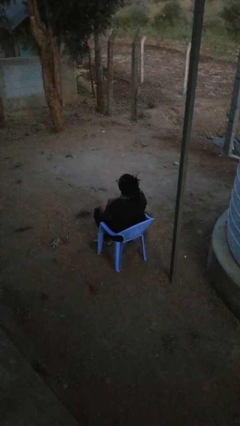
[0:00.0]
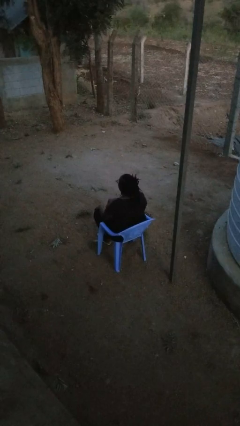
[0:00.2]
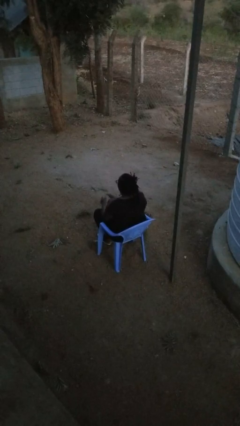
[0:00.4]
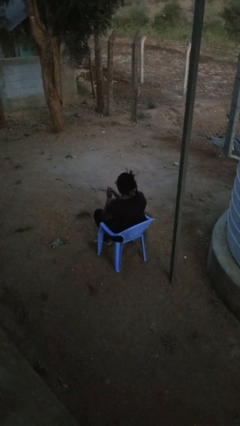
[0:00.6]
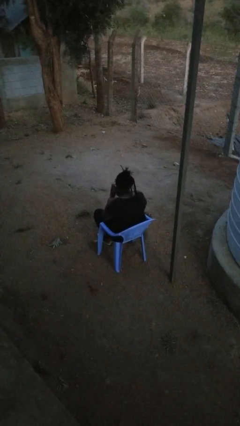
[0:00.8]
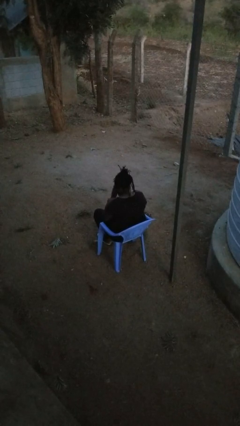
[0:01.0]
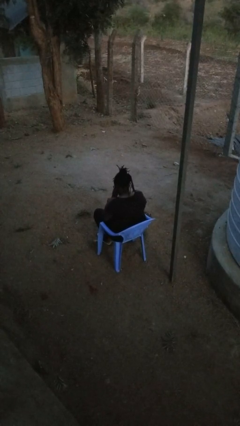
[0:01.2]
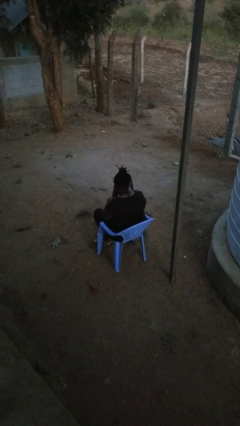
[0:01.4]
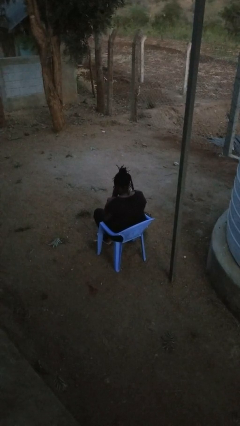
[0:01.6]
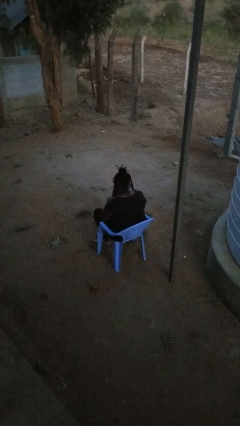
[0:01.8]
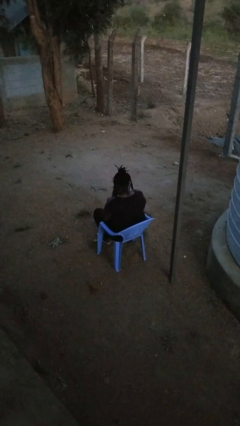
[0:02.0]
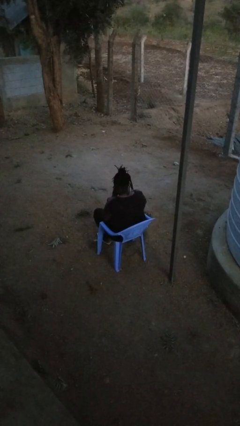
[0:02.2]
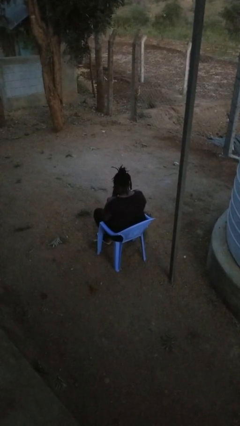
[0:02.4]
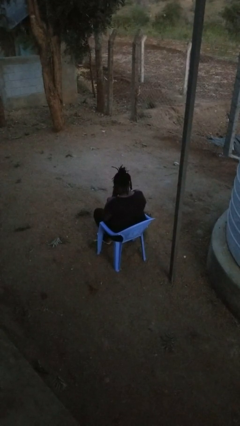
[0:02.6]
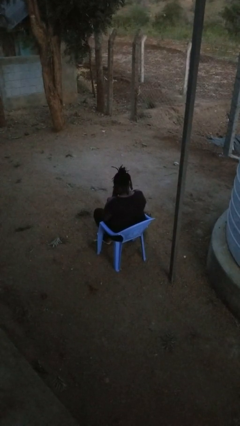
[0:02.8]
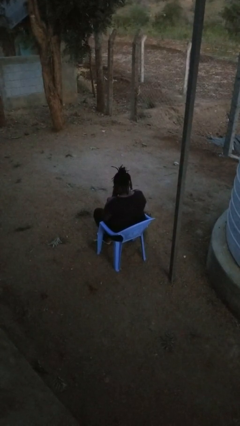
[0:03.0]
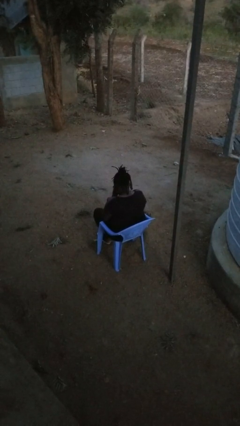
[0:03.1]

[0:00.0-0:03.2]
person prays

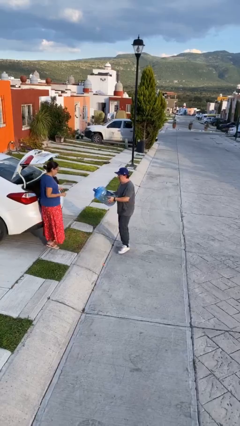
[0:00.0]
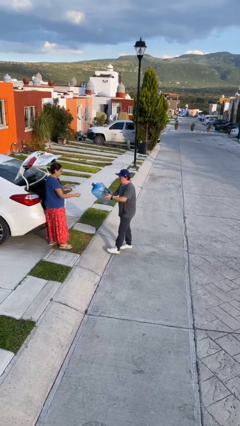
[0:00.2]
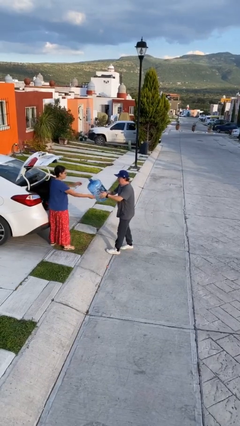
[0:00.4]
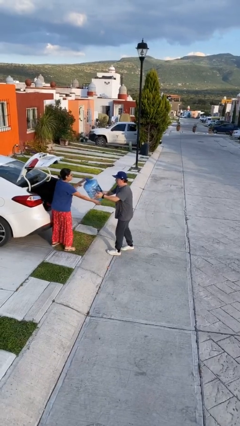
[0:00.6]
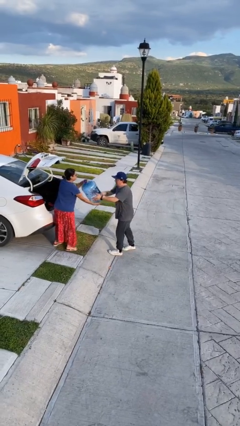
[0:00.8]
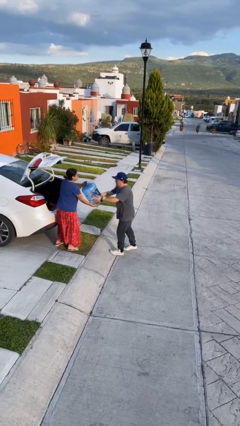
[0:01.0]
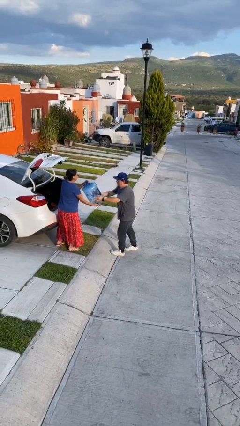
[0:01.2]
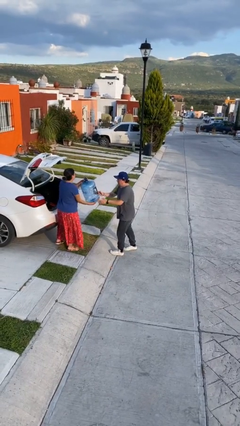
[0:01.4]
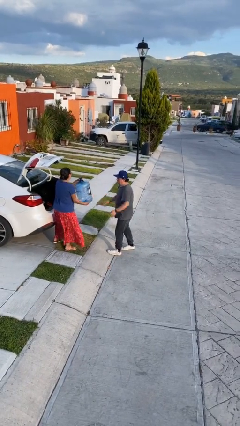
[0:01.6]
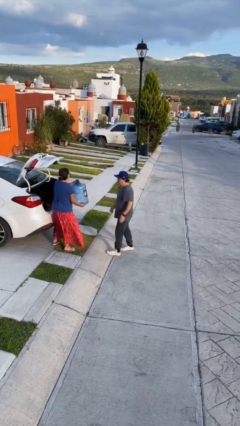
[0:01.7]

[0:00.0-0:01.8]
person transfers object to person

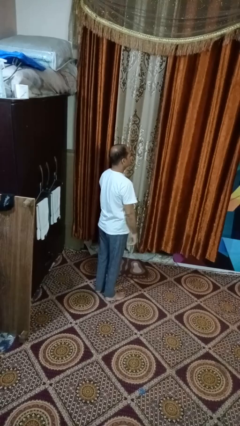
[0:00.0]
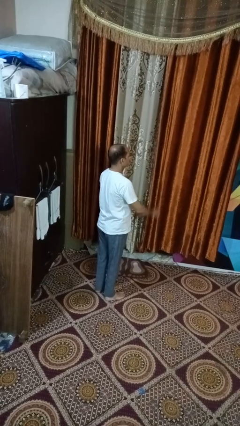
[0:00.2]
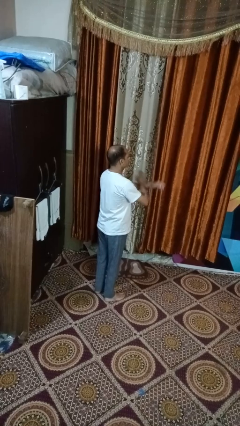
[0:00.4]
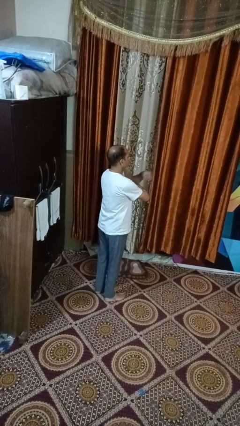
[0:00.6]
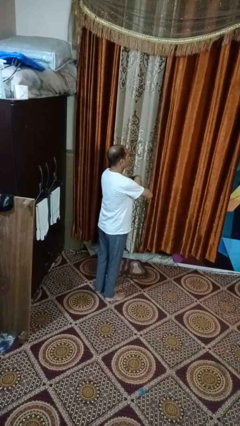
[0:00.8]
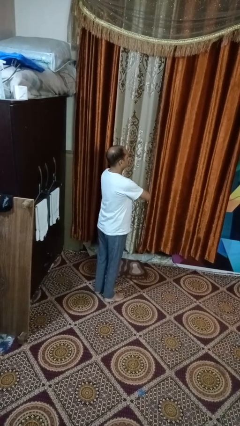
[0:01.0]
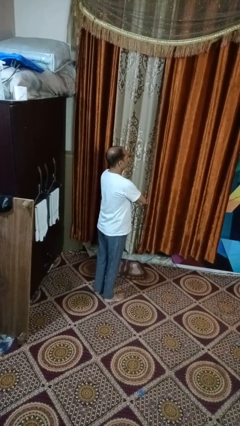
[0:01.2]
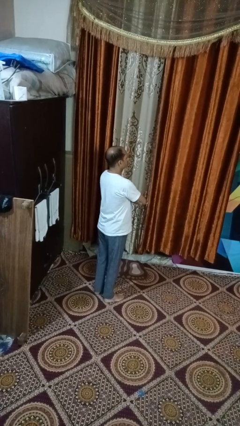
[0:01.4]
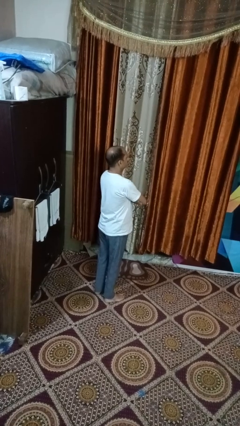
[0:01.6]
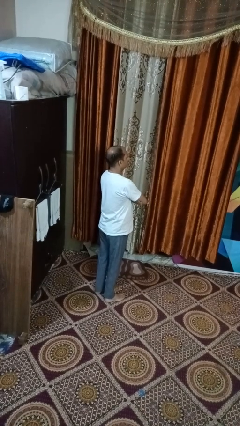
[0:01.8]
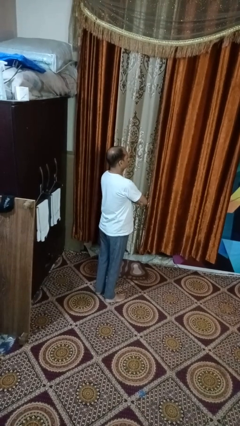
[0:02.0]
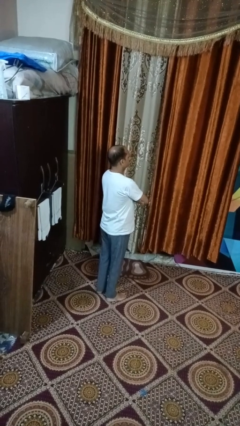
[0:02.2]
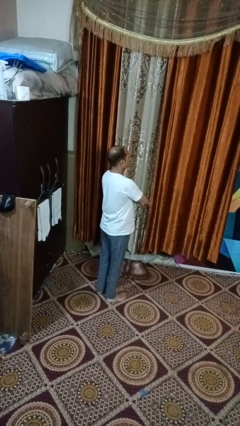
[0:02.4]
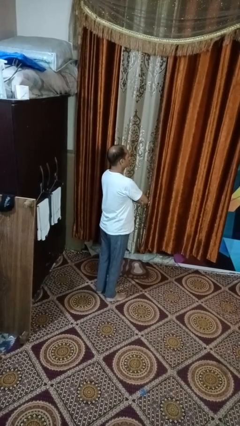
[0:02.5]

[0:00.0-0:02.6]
person crosses arms

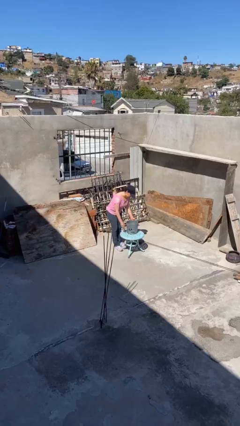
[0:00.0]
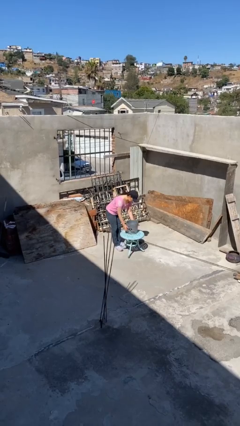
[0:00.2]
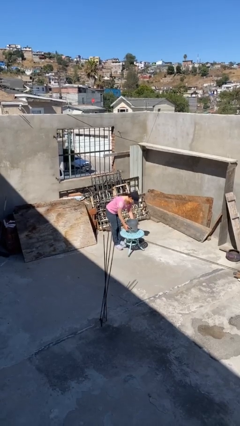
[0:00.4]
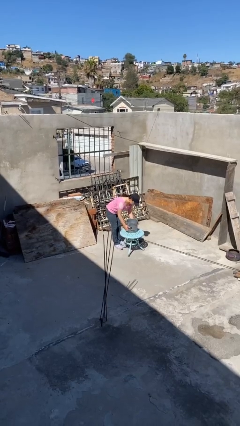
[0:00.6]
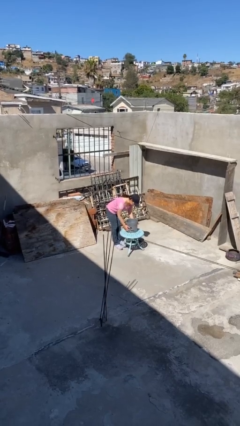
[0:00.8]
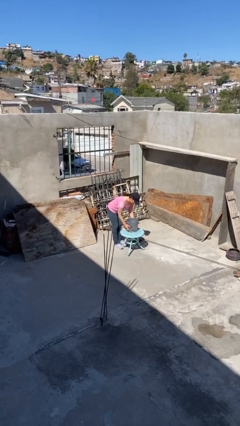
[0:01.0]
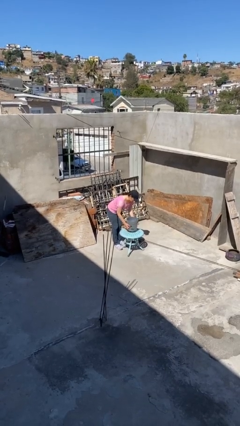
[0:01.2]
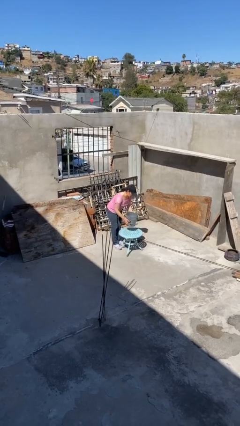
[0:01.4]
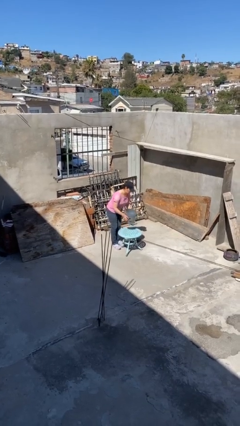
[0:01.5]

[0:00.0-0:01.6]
person picks up object from table

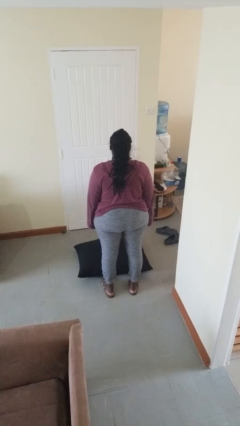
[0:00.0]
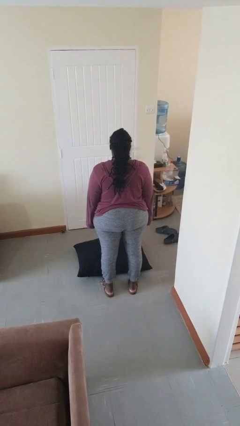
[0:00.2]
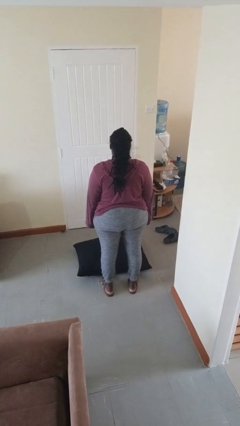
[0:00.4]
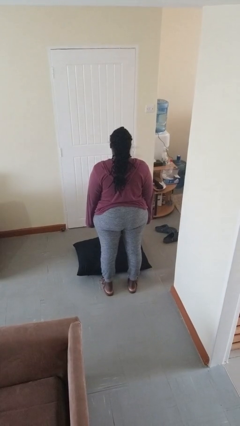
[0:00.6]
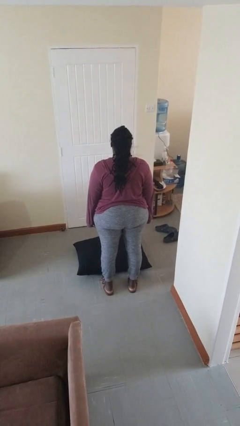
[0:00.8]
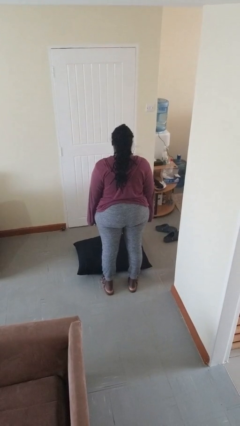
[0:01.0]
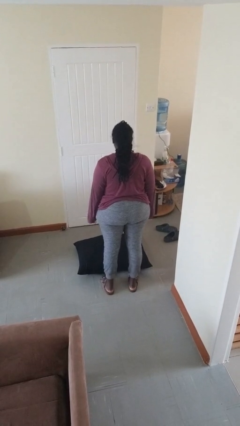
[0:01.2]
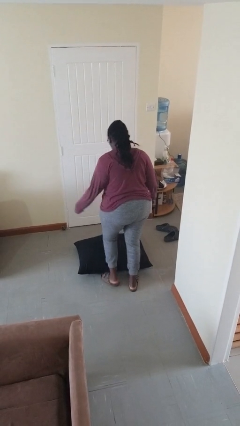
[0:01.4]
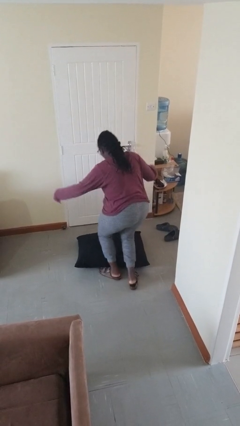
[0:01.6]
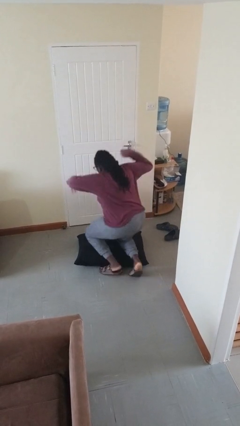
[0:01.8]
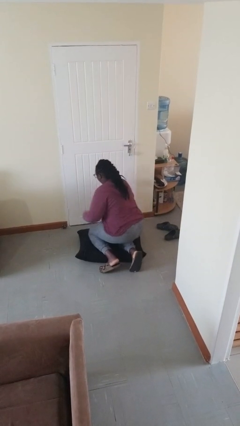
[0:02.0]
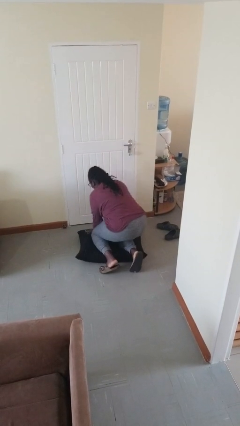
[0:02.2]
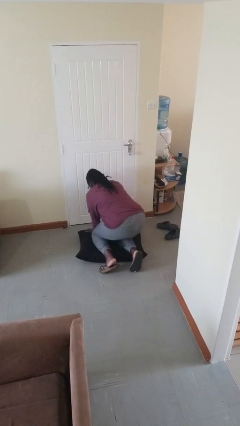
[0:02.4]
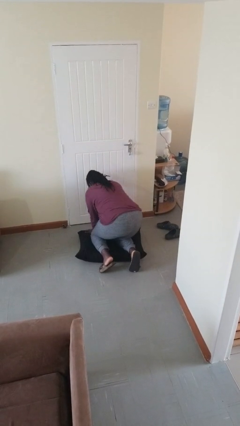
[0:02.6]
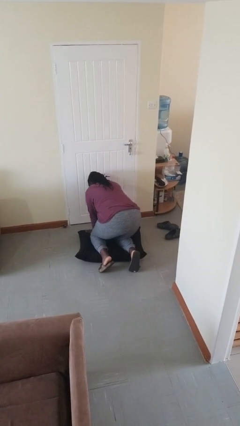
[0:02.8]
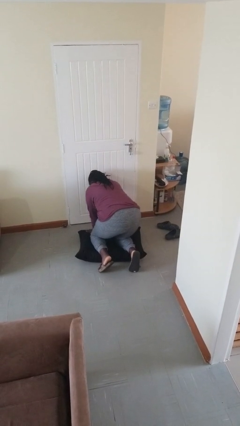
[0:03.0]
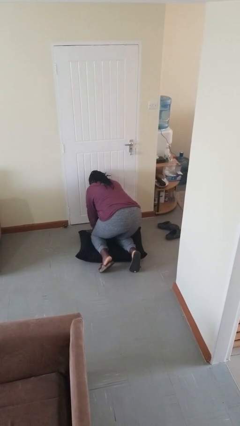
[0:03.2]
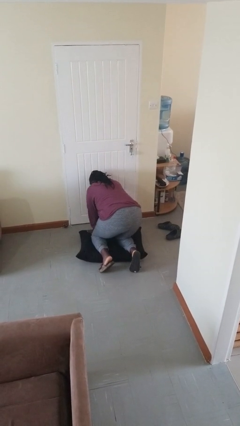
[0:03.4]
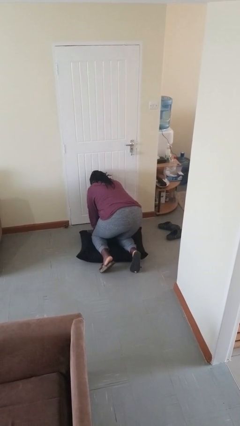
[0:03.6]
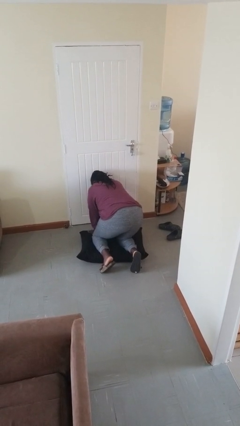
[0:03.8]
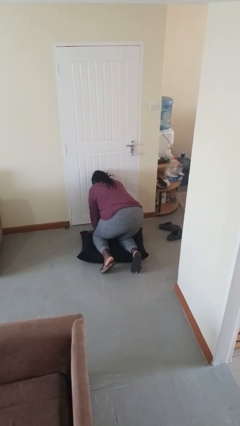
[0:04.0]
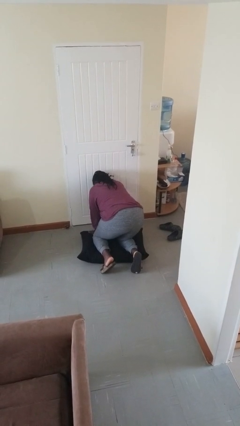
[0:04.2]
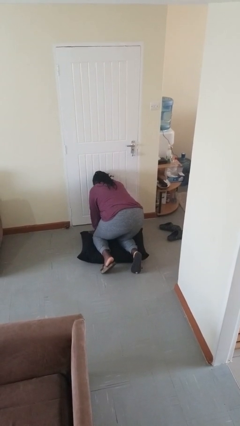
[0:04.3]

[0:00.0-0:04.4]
person trips on object on floor

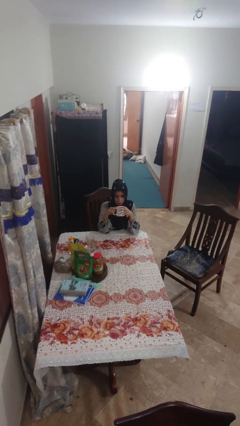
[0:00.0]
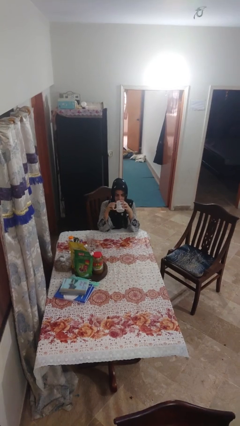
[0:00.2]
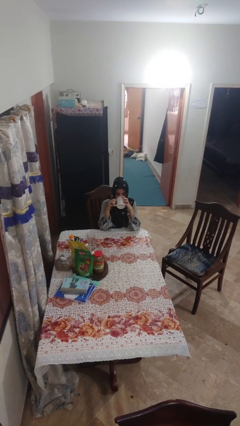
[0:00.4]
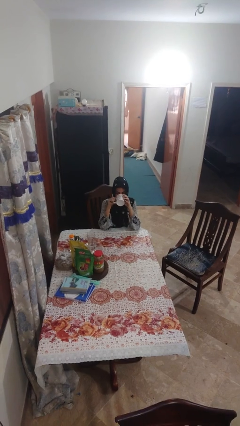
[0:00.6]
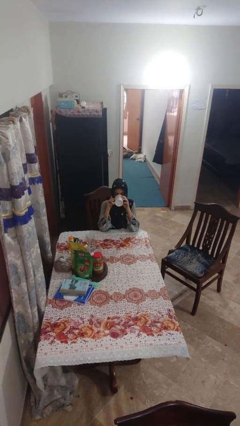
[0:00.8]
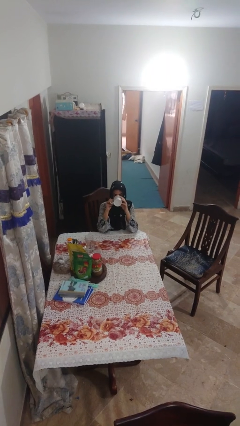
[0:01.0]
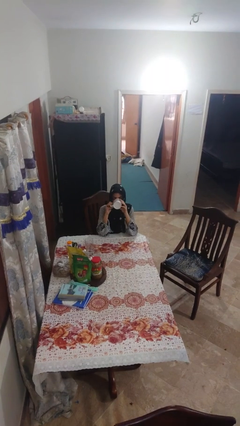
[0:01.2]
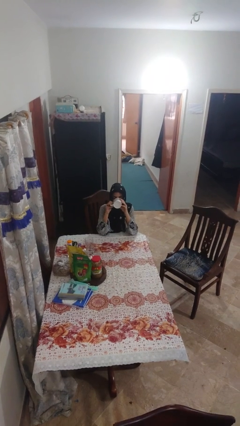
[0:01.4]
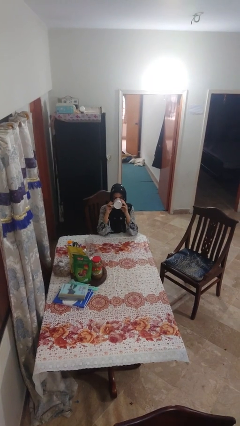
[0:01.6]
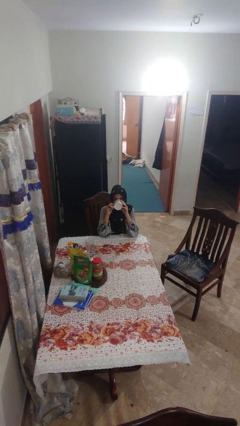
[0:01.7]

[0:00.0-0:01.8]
person drinks from mug

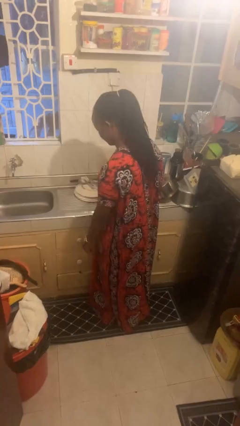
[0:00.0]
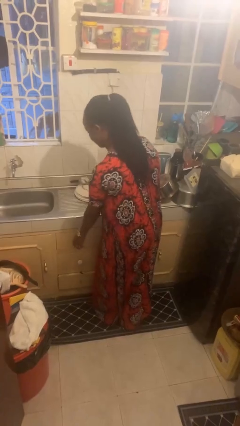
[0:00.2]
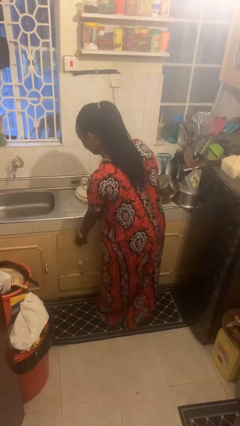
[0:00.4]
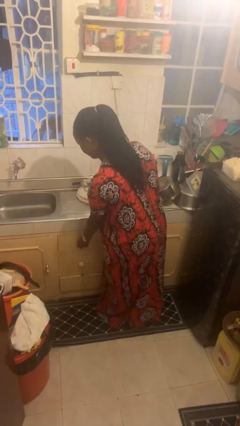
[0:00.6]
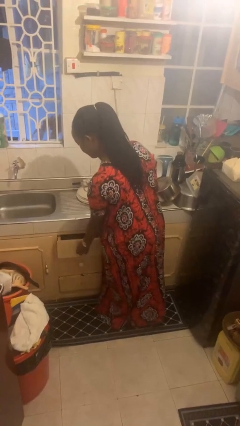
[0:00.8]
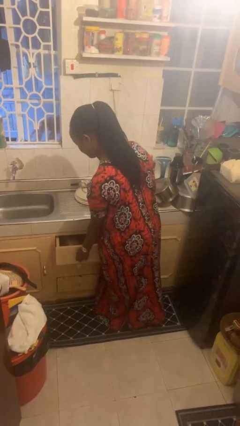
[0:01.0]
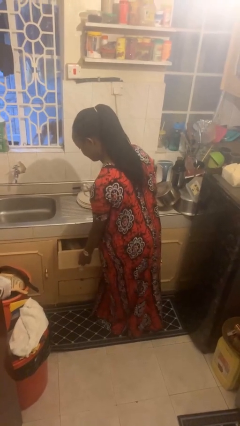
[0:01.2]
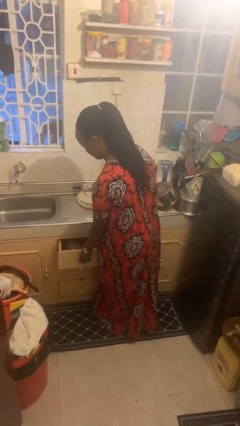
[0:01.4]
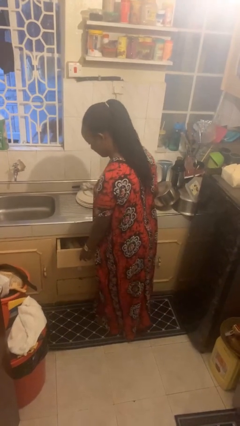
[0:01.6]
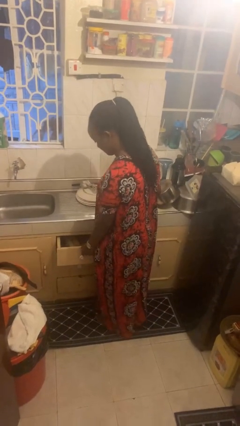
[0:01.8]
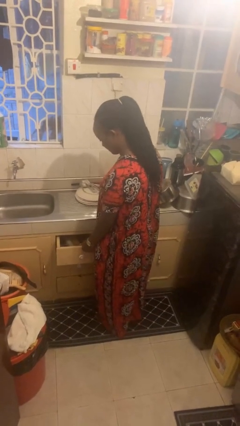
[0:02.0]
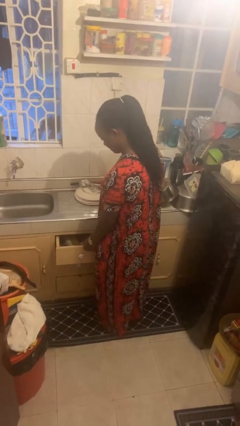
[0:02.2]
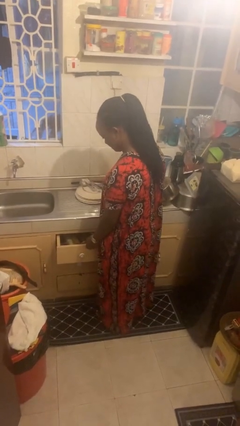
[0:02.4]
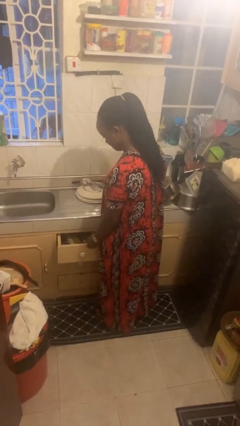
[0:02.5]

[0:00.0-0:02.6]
person opens kitchen drawer
